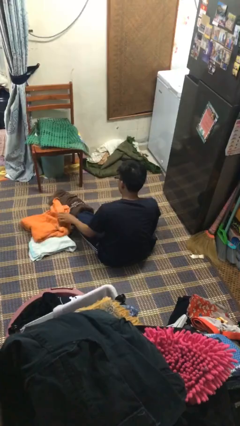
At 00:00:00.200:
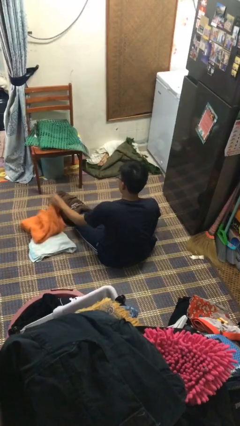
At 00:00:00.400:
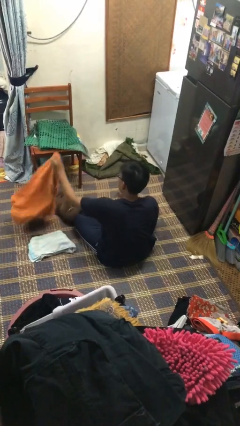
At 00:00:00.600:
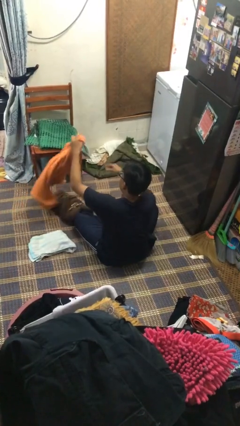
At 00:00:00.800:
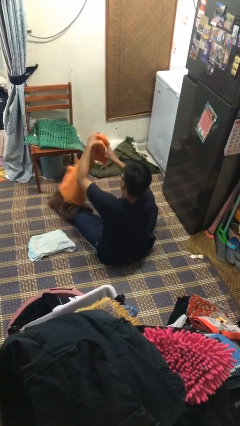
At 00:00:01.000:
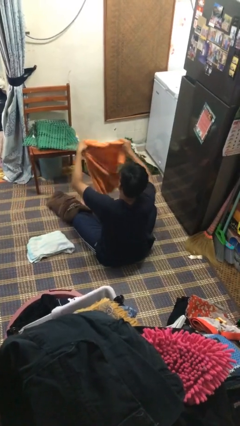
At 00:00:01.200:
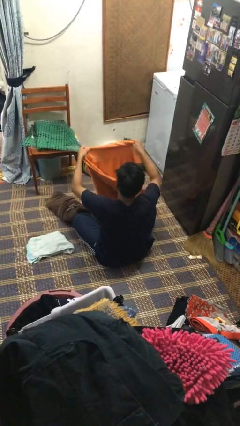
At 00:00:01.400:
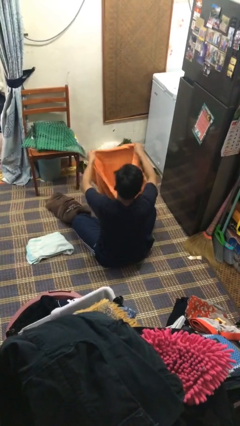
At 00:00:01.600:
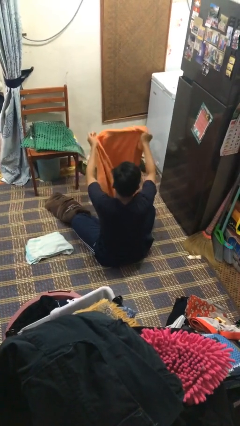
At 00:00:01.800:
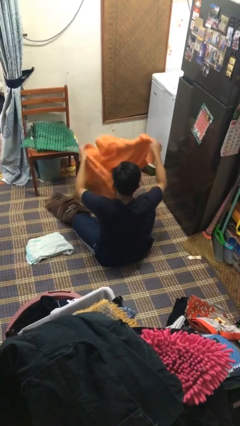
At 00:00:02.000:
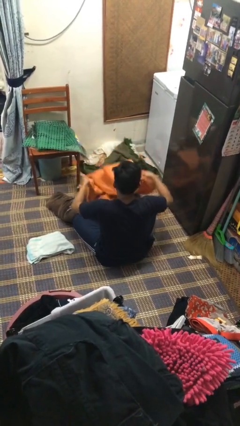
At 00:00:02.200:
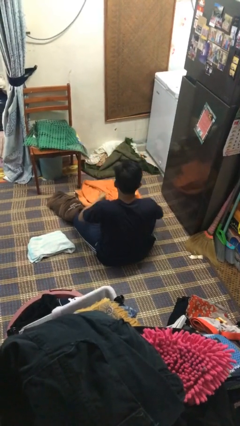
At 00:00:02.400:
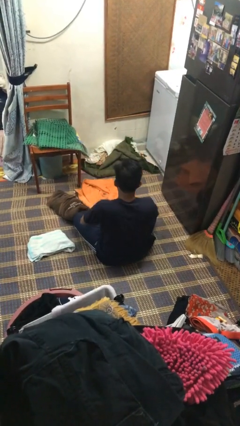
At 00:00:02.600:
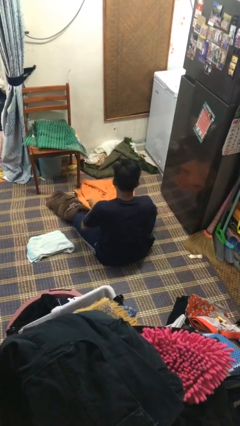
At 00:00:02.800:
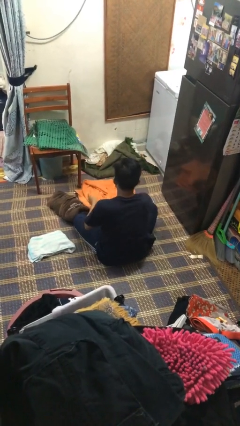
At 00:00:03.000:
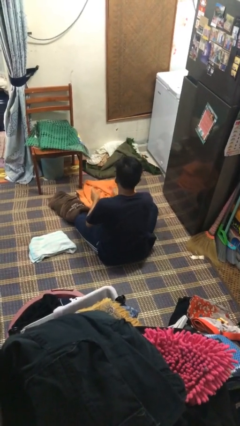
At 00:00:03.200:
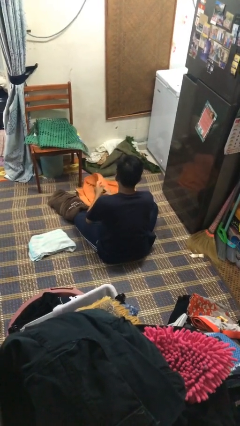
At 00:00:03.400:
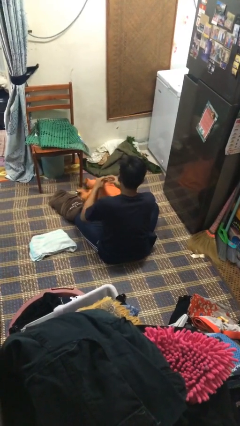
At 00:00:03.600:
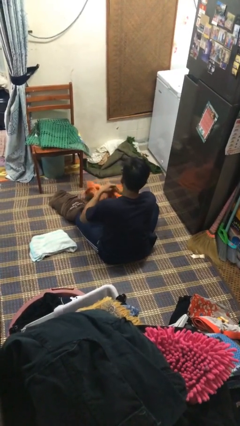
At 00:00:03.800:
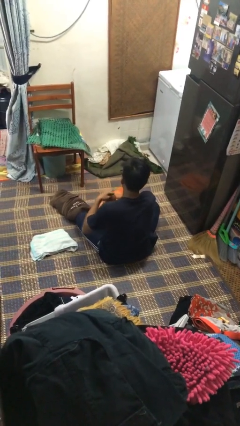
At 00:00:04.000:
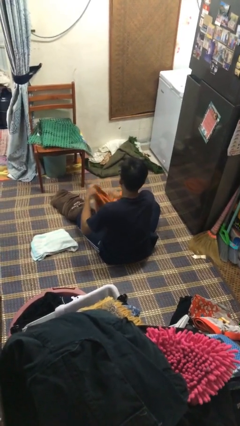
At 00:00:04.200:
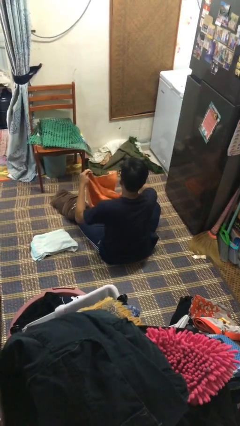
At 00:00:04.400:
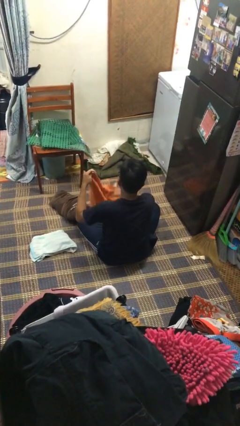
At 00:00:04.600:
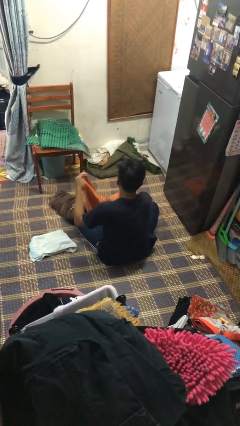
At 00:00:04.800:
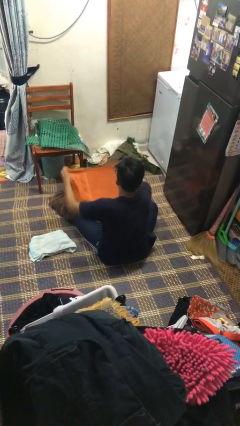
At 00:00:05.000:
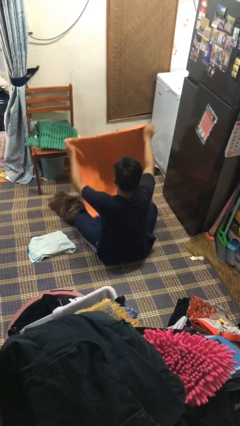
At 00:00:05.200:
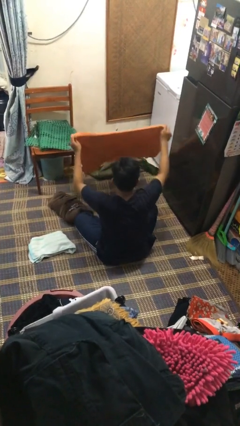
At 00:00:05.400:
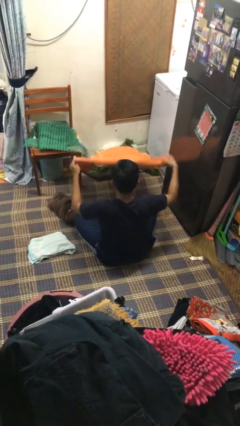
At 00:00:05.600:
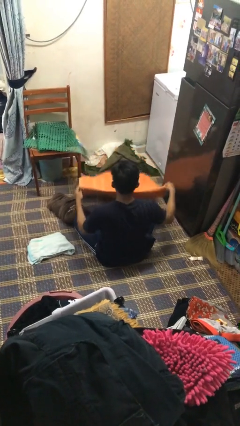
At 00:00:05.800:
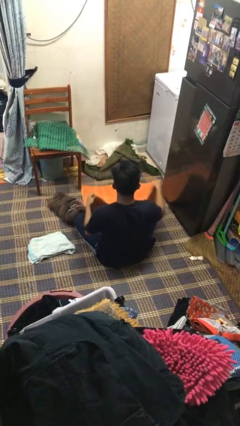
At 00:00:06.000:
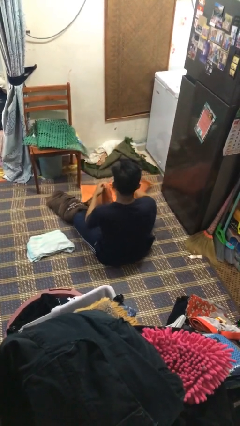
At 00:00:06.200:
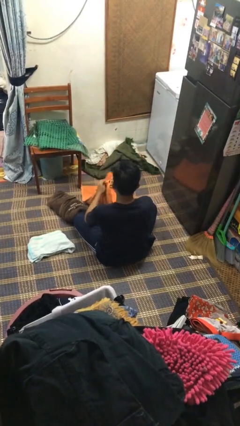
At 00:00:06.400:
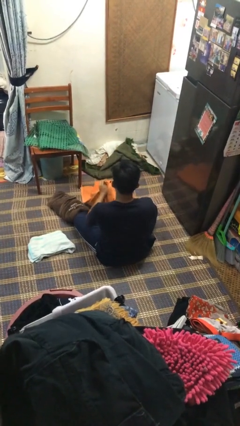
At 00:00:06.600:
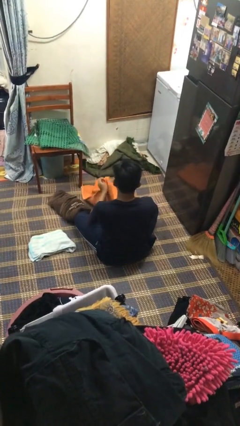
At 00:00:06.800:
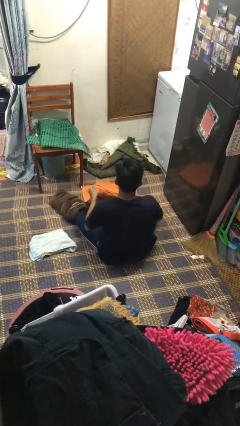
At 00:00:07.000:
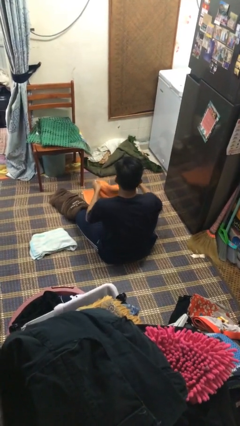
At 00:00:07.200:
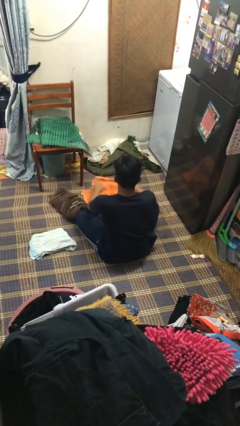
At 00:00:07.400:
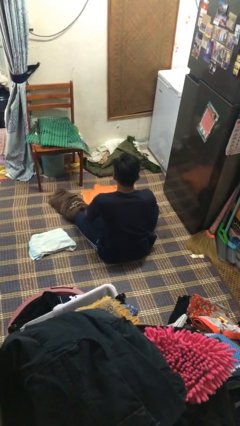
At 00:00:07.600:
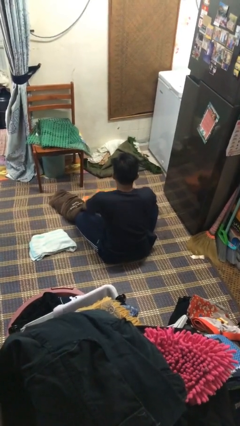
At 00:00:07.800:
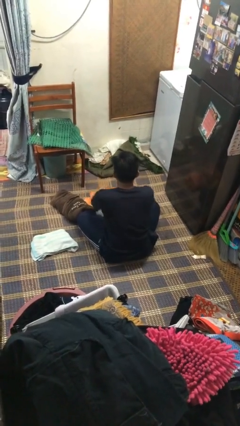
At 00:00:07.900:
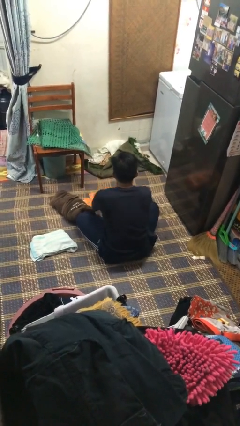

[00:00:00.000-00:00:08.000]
person folds towel

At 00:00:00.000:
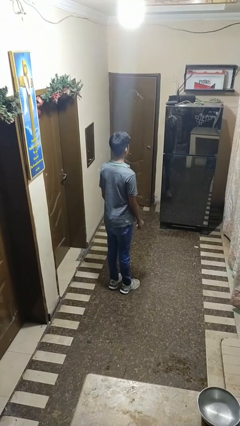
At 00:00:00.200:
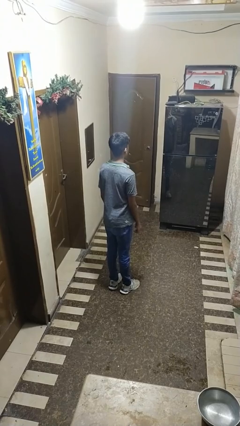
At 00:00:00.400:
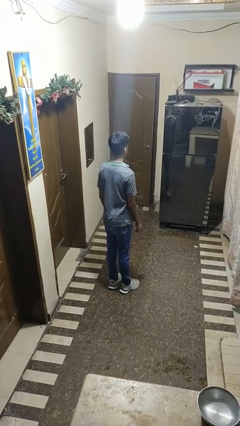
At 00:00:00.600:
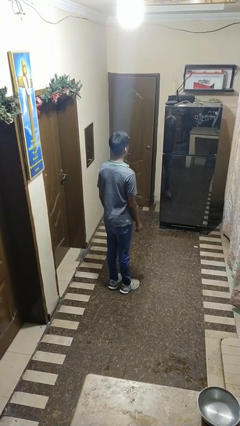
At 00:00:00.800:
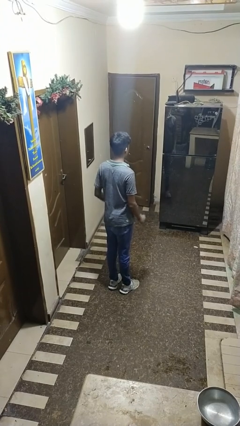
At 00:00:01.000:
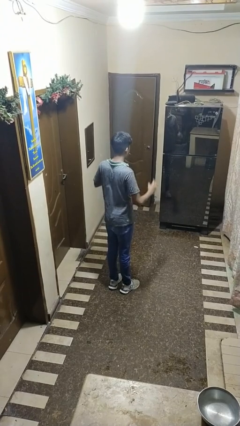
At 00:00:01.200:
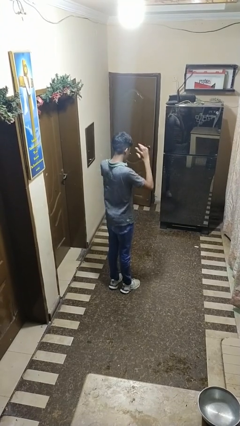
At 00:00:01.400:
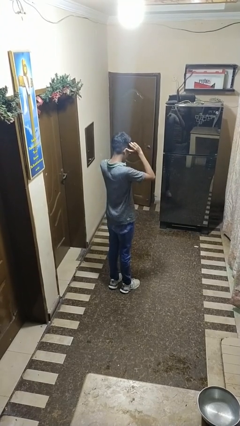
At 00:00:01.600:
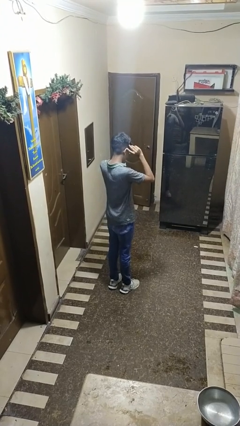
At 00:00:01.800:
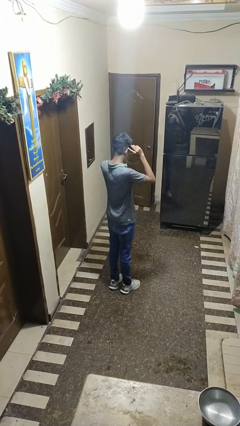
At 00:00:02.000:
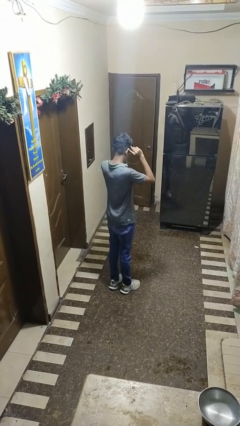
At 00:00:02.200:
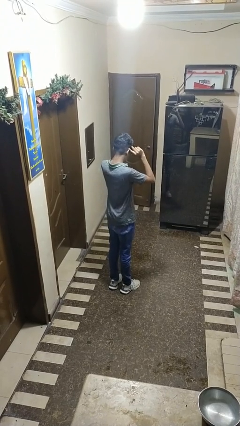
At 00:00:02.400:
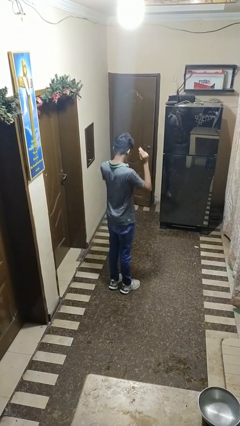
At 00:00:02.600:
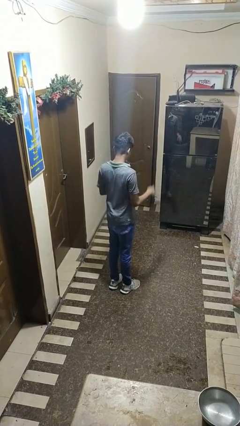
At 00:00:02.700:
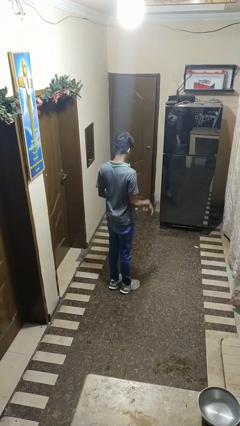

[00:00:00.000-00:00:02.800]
person rubs eyes

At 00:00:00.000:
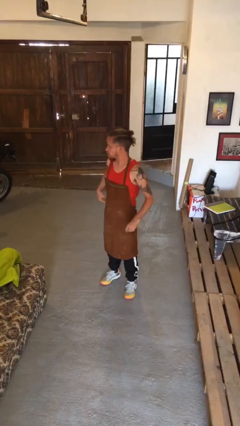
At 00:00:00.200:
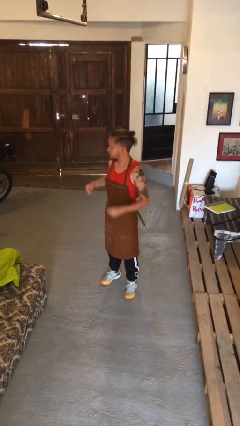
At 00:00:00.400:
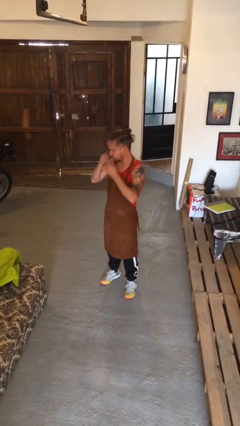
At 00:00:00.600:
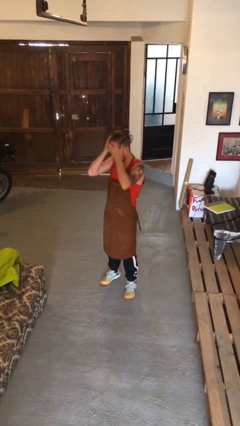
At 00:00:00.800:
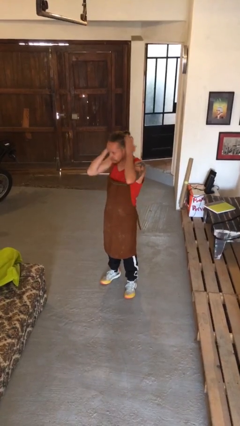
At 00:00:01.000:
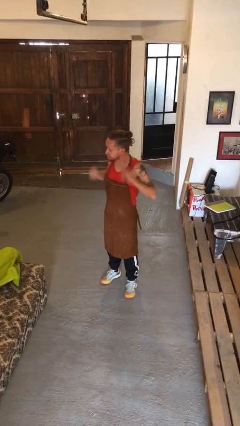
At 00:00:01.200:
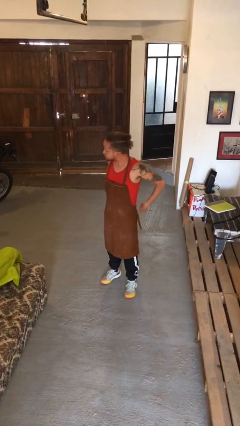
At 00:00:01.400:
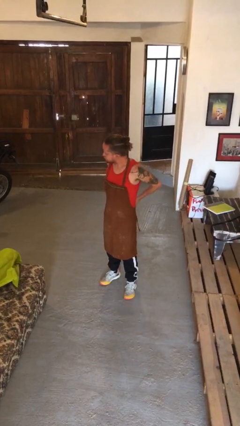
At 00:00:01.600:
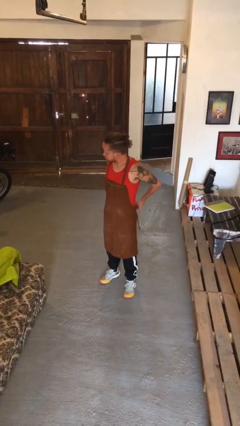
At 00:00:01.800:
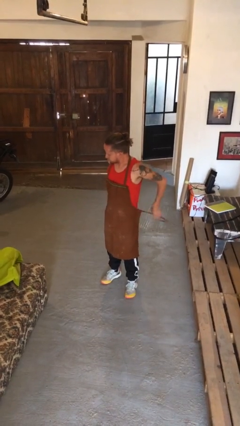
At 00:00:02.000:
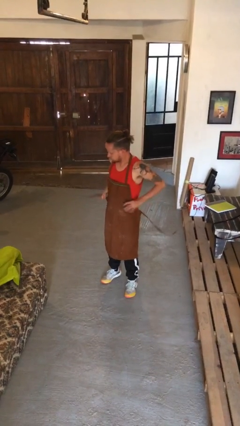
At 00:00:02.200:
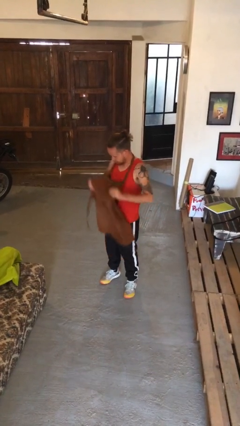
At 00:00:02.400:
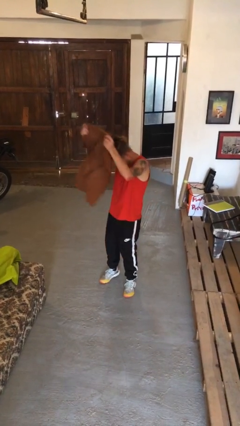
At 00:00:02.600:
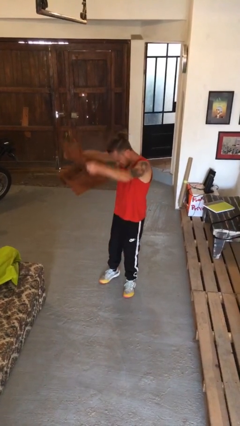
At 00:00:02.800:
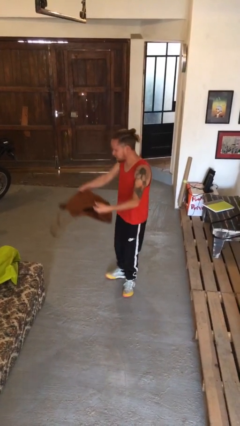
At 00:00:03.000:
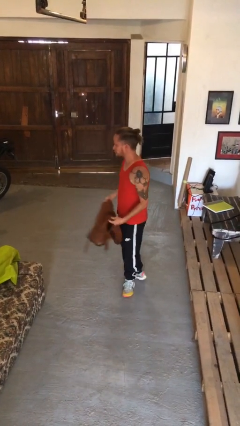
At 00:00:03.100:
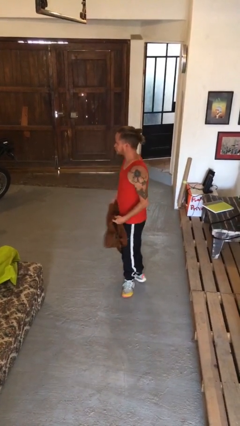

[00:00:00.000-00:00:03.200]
person takes off apron

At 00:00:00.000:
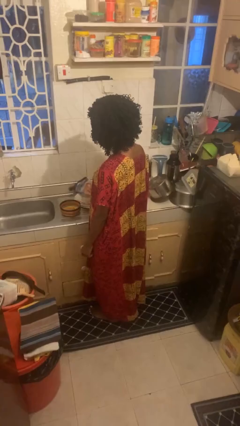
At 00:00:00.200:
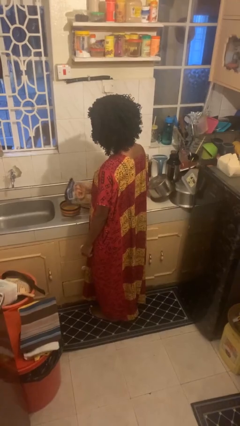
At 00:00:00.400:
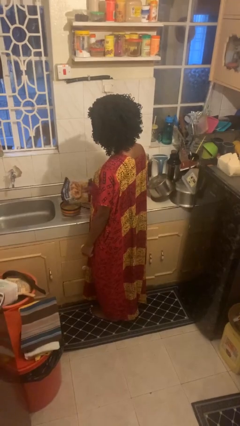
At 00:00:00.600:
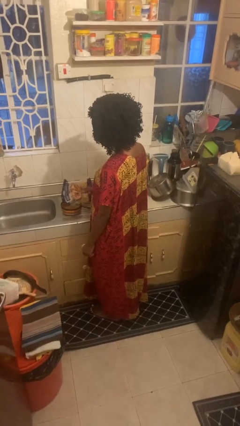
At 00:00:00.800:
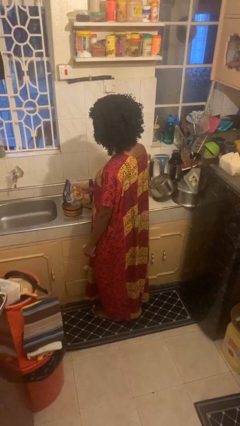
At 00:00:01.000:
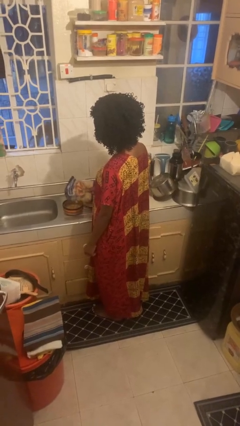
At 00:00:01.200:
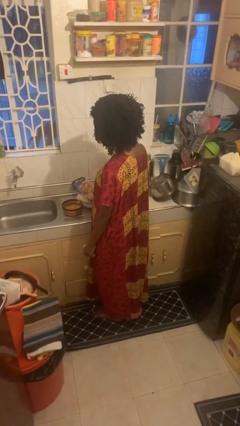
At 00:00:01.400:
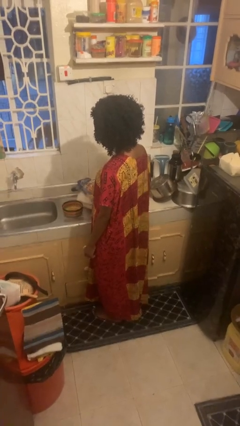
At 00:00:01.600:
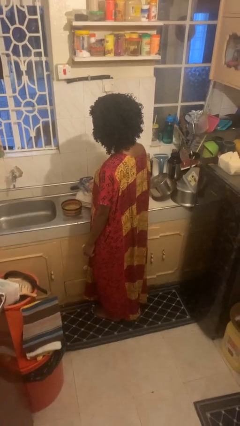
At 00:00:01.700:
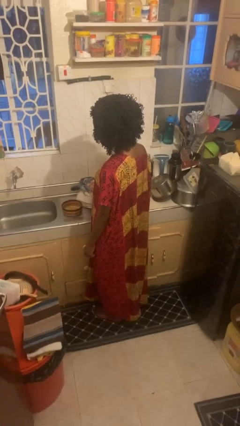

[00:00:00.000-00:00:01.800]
person pours into bowl

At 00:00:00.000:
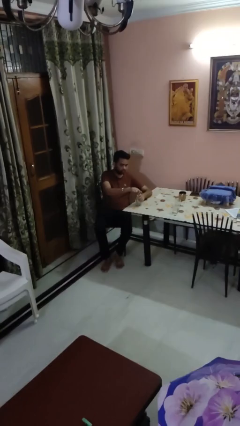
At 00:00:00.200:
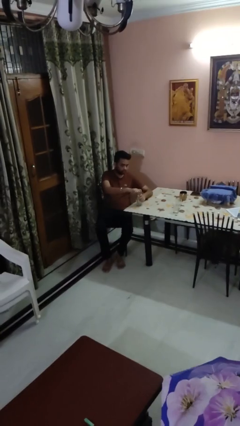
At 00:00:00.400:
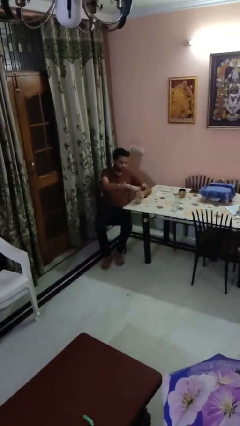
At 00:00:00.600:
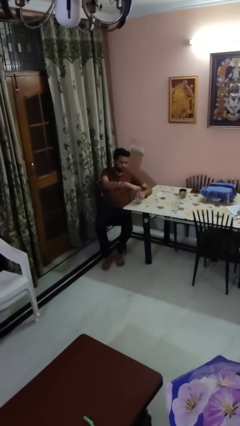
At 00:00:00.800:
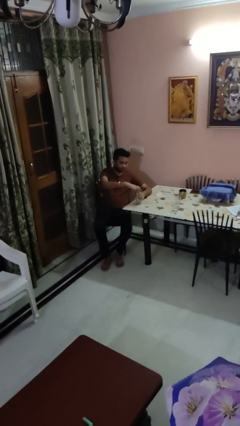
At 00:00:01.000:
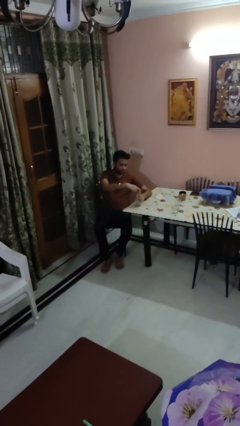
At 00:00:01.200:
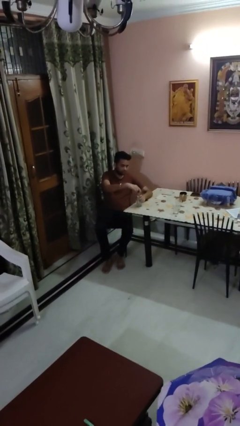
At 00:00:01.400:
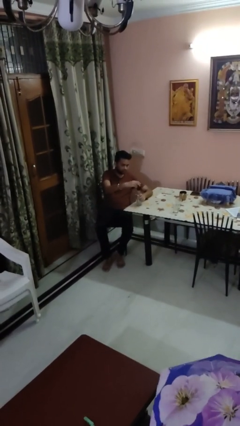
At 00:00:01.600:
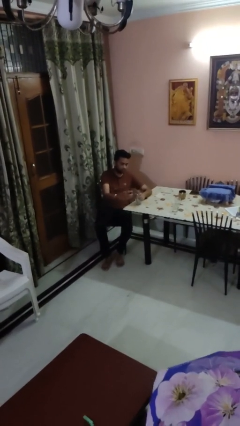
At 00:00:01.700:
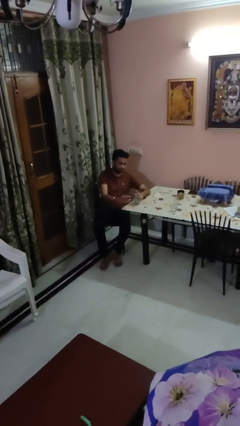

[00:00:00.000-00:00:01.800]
person unscrews lid from bottle
